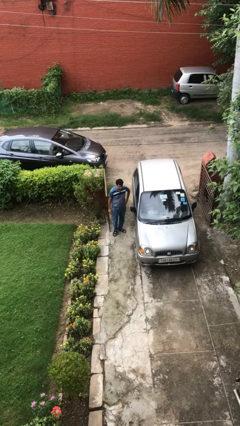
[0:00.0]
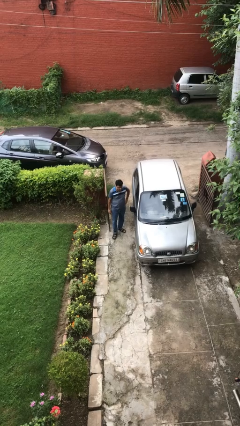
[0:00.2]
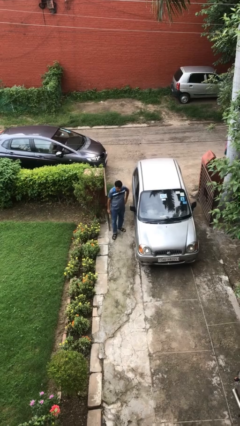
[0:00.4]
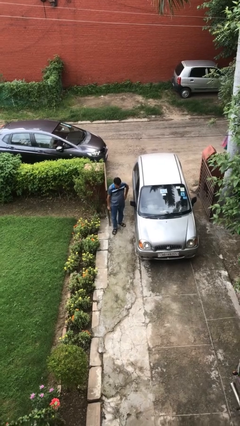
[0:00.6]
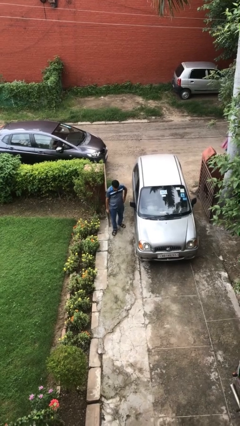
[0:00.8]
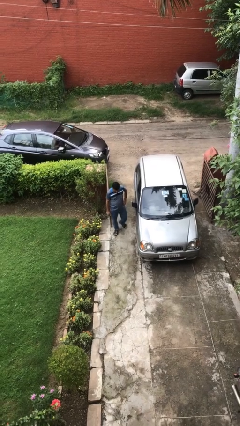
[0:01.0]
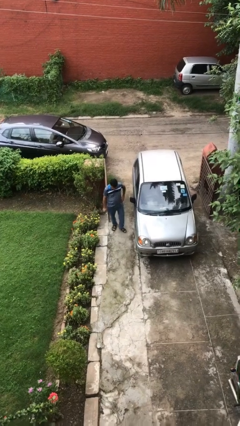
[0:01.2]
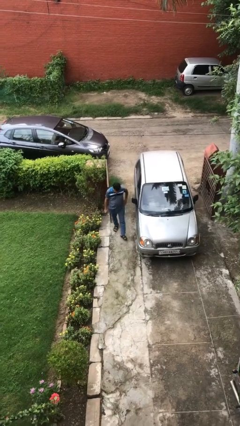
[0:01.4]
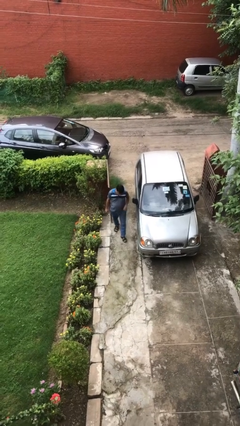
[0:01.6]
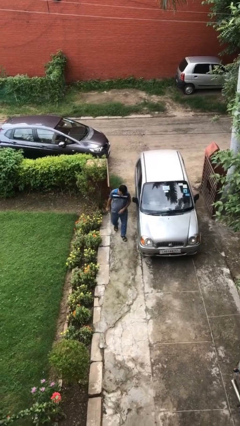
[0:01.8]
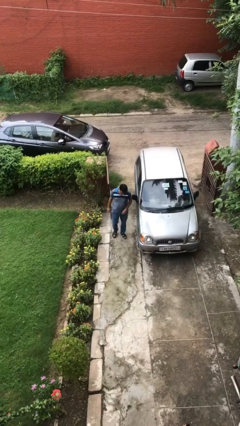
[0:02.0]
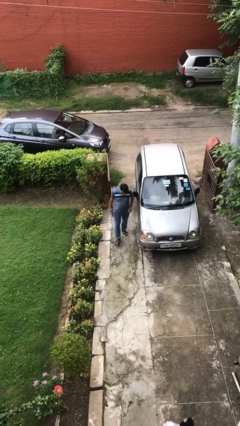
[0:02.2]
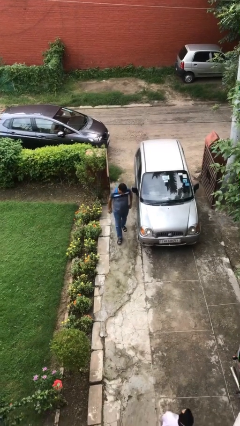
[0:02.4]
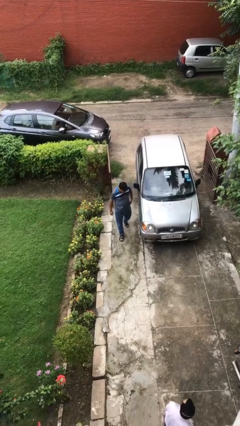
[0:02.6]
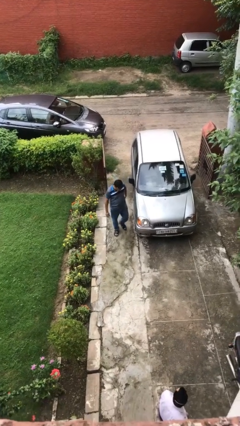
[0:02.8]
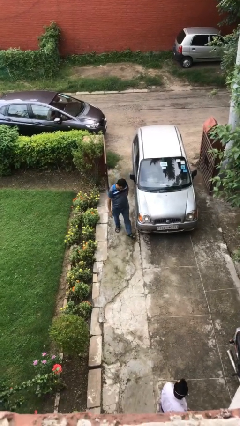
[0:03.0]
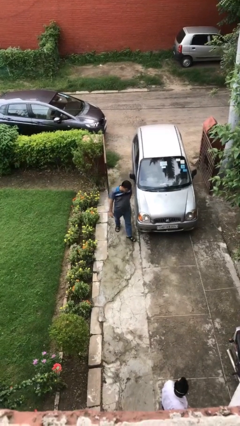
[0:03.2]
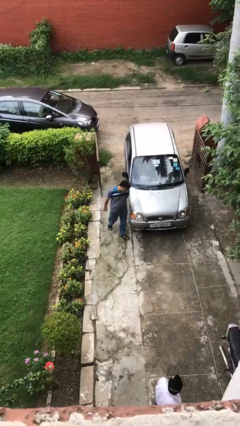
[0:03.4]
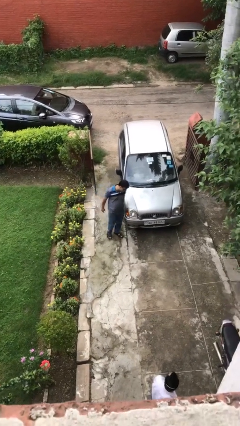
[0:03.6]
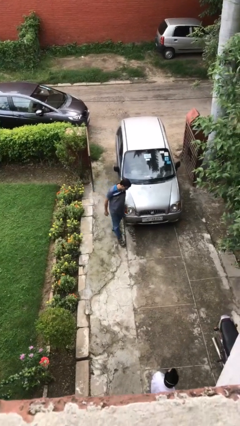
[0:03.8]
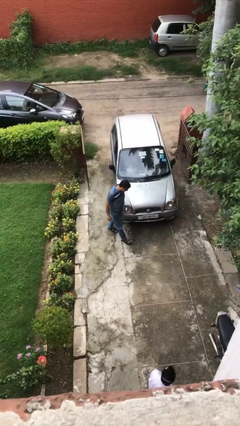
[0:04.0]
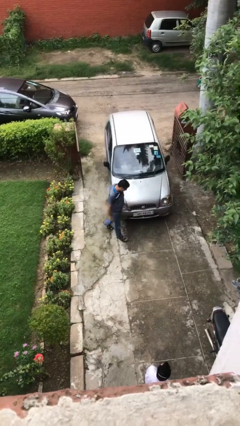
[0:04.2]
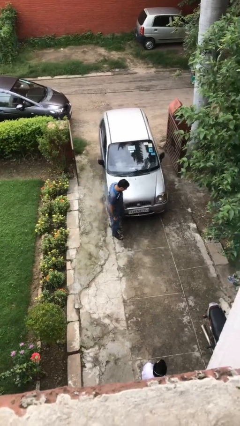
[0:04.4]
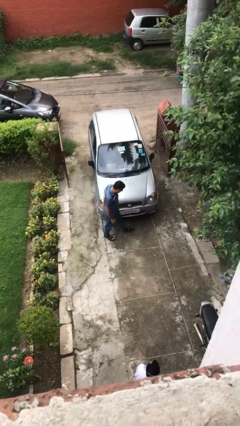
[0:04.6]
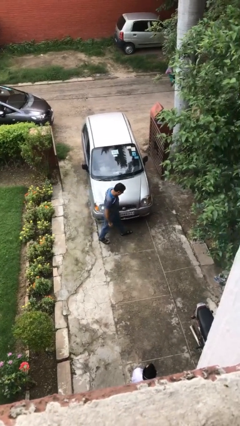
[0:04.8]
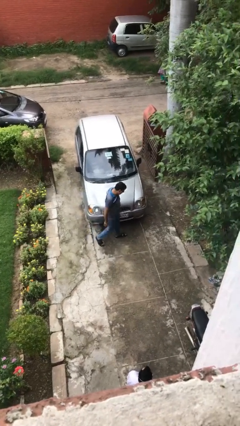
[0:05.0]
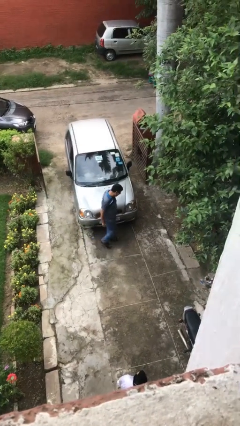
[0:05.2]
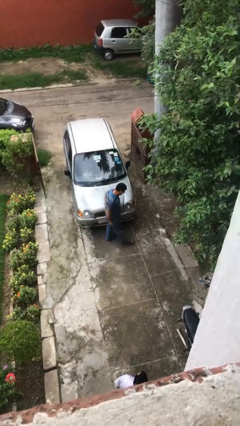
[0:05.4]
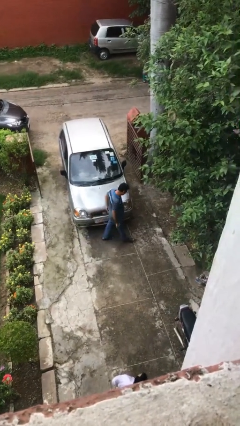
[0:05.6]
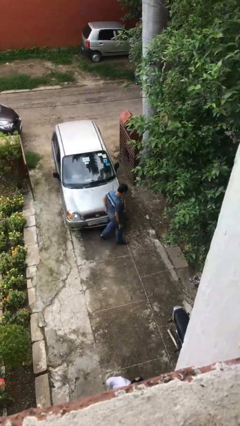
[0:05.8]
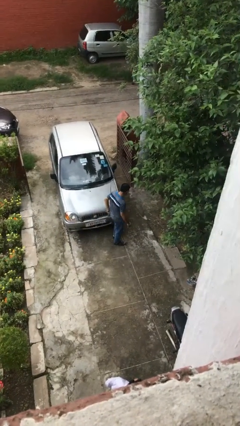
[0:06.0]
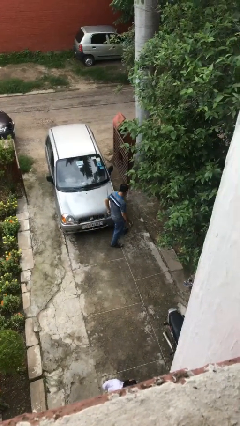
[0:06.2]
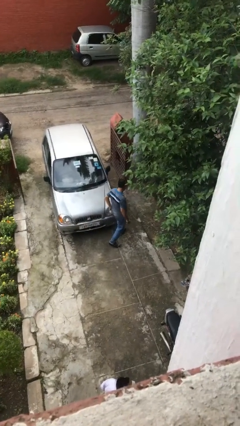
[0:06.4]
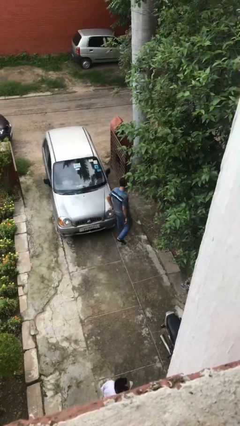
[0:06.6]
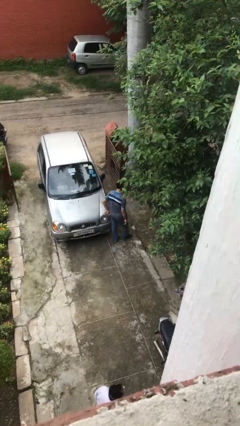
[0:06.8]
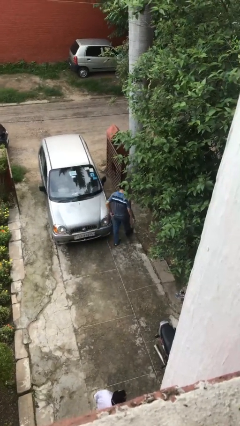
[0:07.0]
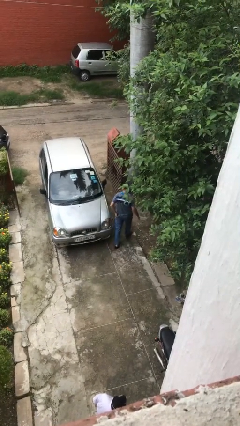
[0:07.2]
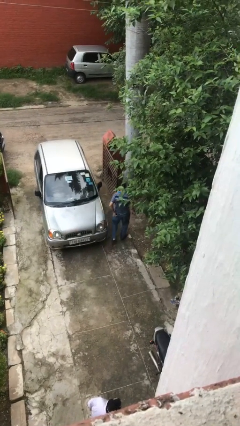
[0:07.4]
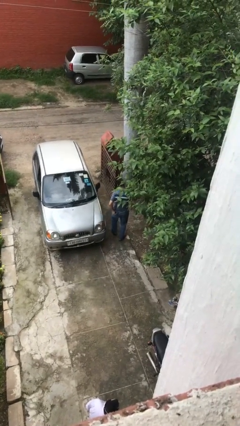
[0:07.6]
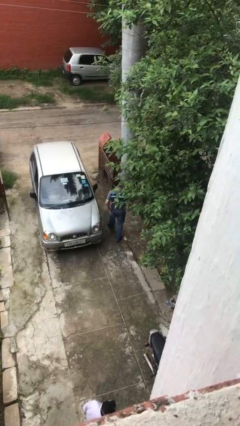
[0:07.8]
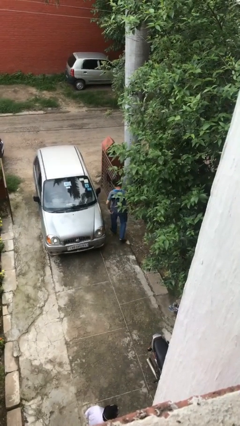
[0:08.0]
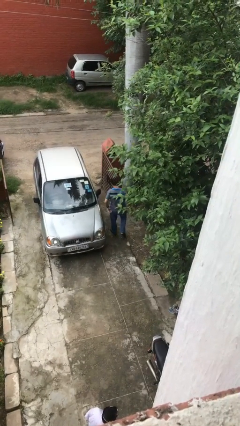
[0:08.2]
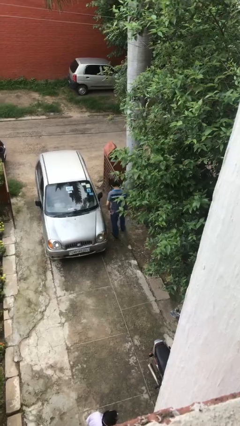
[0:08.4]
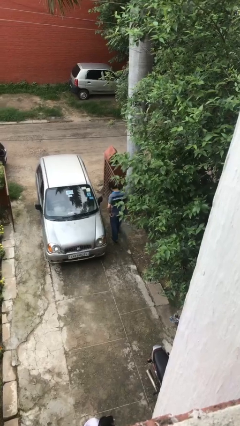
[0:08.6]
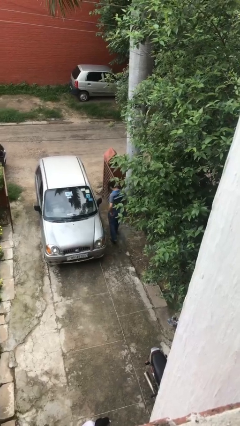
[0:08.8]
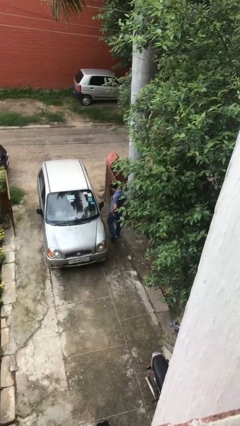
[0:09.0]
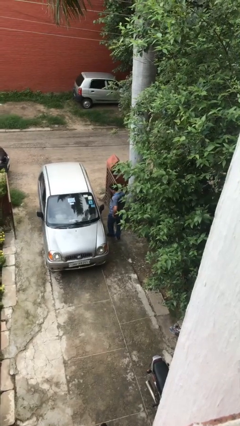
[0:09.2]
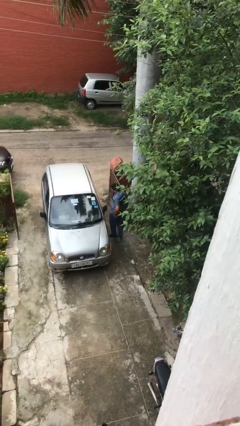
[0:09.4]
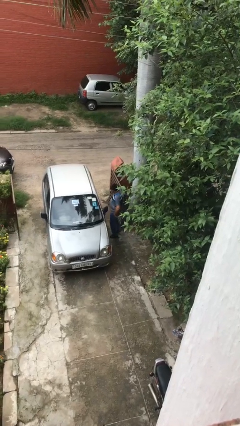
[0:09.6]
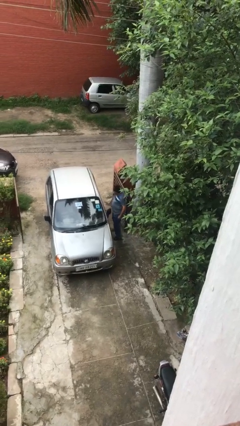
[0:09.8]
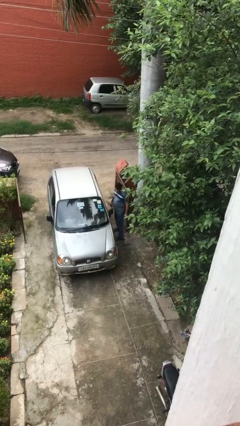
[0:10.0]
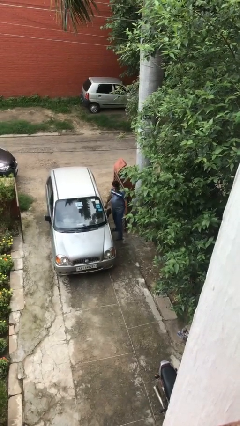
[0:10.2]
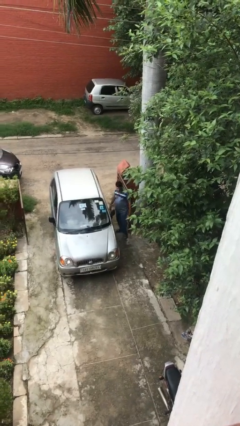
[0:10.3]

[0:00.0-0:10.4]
person walks around car

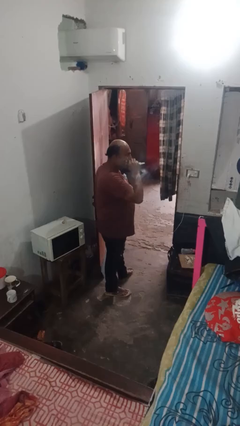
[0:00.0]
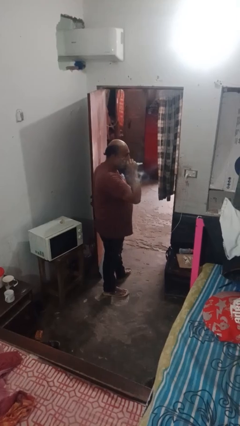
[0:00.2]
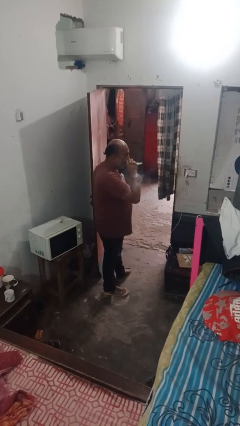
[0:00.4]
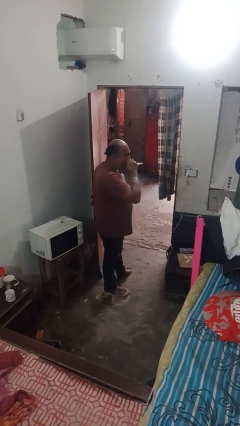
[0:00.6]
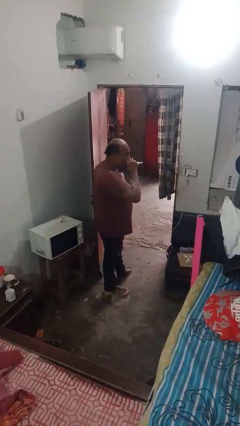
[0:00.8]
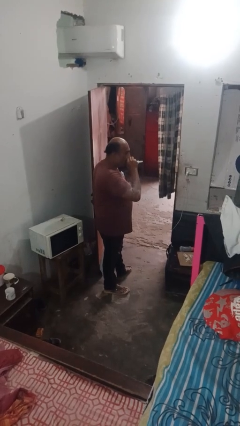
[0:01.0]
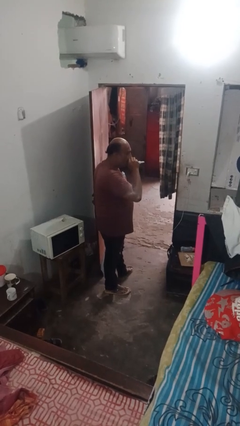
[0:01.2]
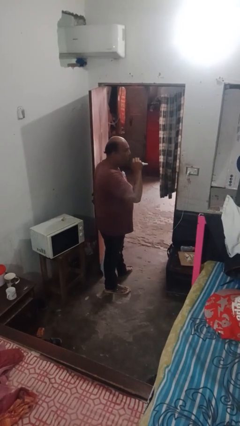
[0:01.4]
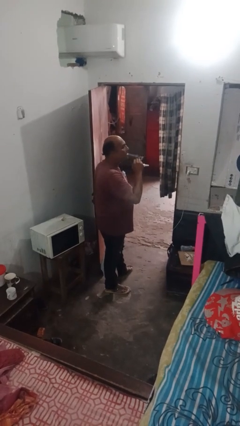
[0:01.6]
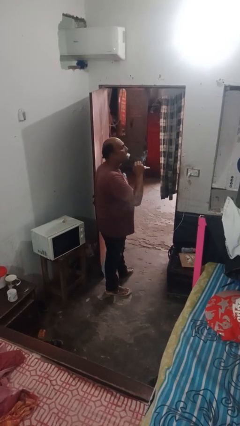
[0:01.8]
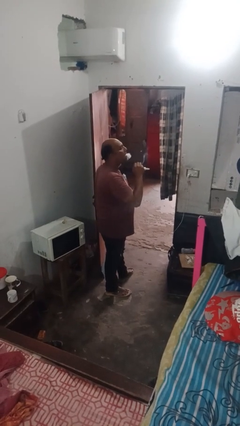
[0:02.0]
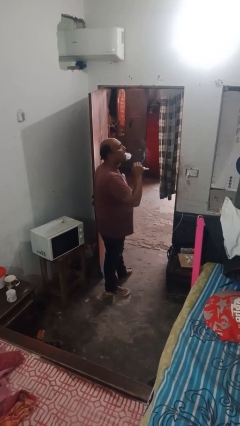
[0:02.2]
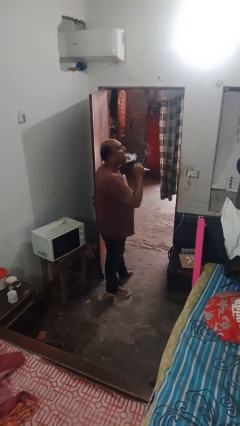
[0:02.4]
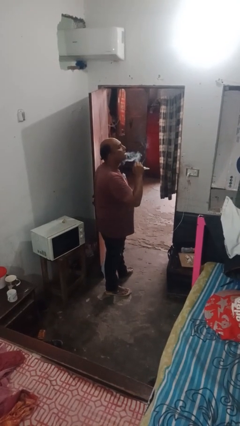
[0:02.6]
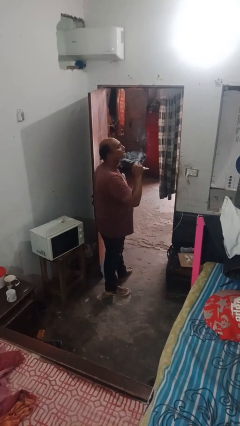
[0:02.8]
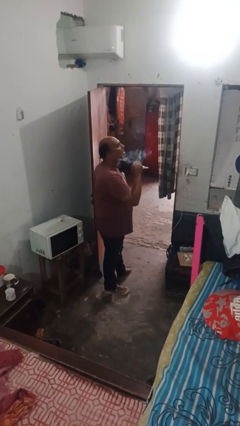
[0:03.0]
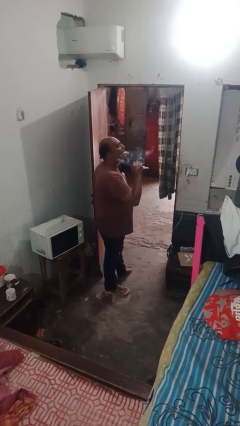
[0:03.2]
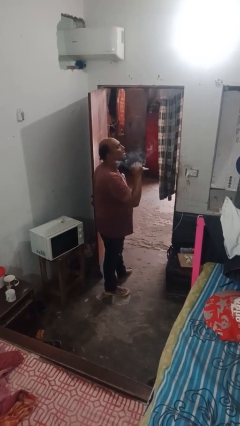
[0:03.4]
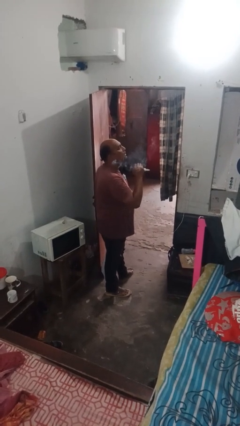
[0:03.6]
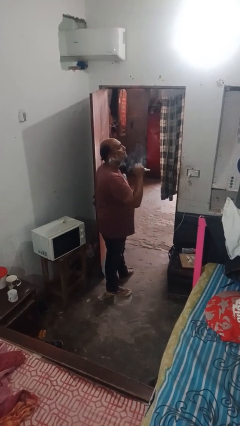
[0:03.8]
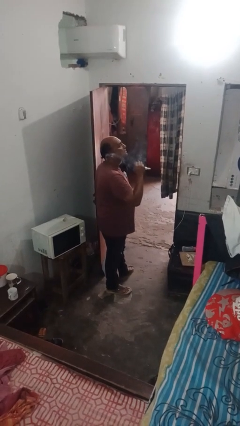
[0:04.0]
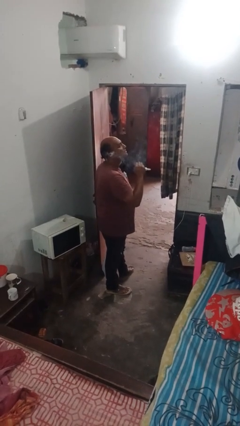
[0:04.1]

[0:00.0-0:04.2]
person vapes

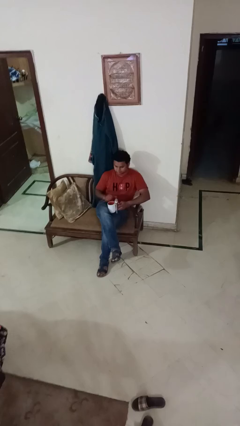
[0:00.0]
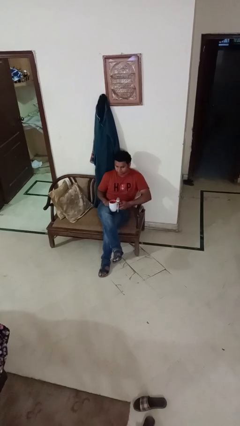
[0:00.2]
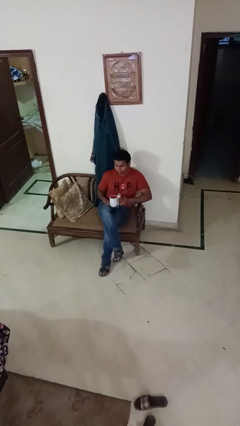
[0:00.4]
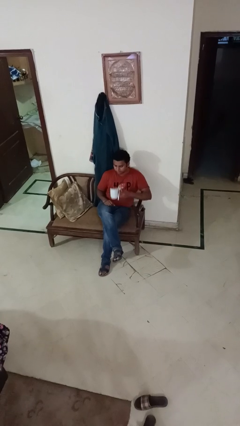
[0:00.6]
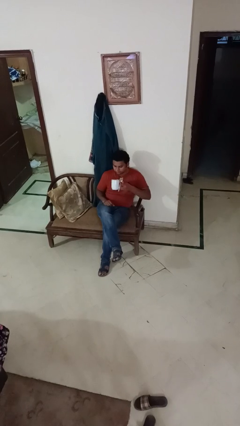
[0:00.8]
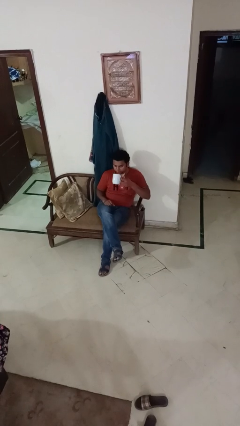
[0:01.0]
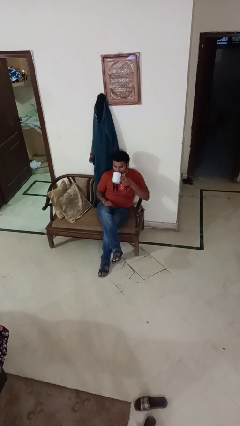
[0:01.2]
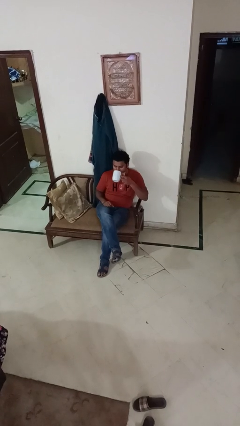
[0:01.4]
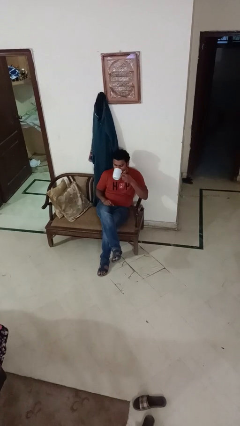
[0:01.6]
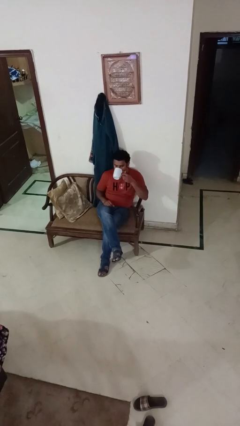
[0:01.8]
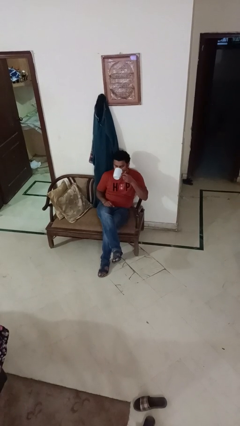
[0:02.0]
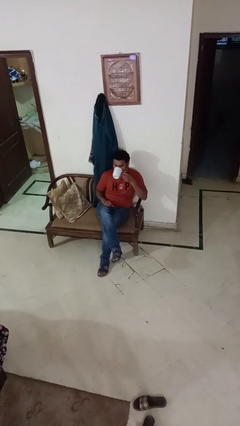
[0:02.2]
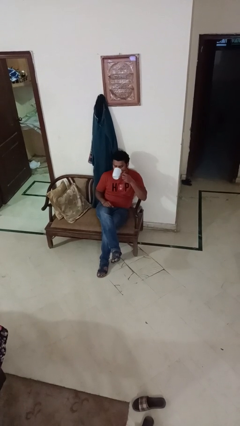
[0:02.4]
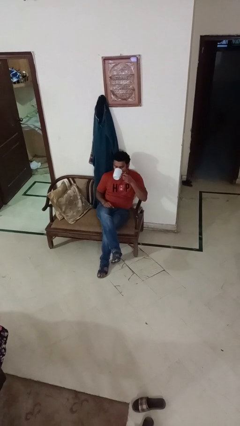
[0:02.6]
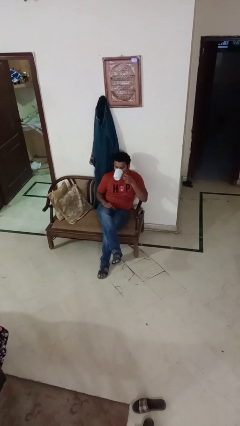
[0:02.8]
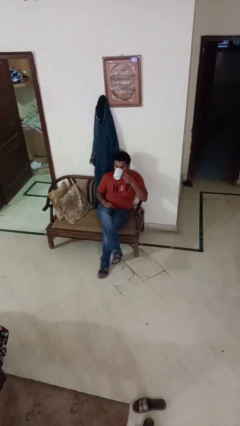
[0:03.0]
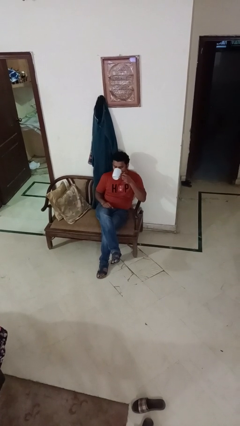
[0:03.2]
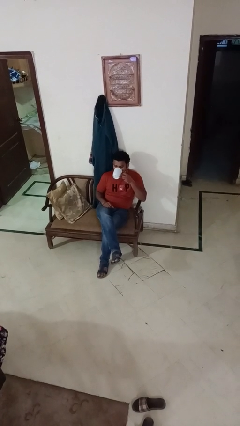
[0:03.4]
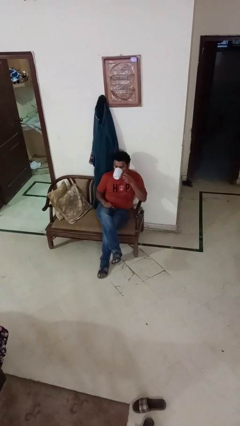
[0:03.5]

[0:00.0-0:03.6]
person drinks from mug
